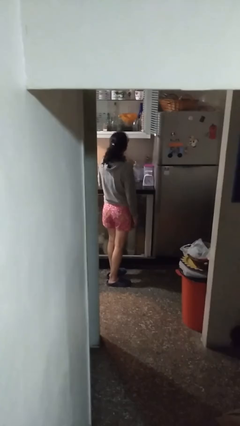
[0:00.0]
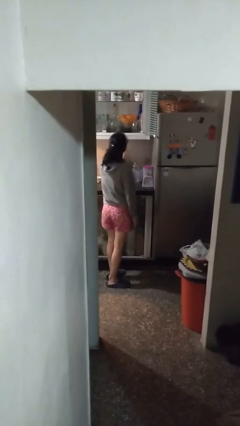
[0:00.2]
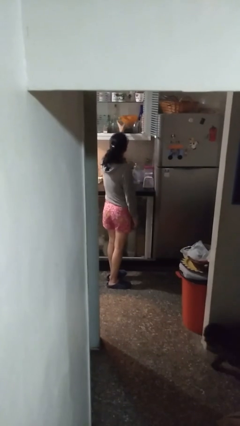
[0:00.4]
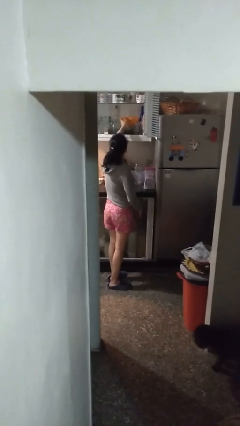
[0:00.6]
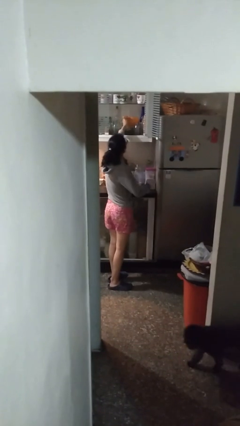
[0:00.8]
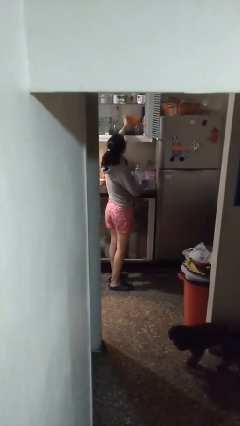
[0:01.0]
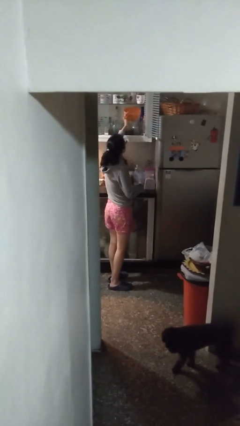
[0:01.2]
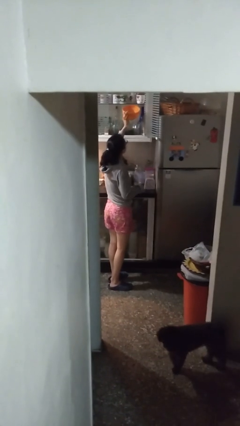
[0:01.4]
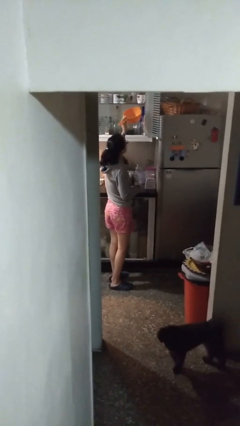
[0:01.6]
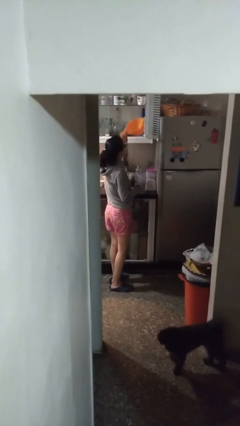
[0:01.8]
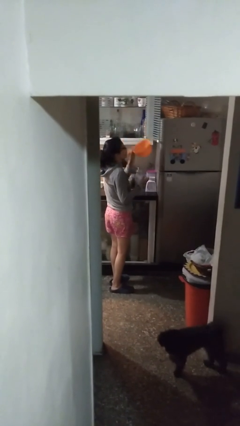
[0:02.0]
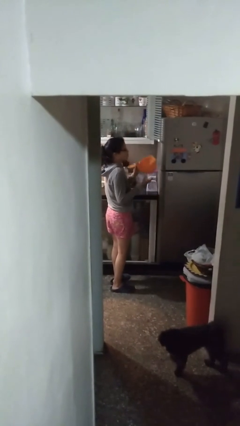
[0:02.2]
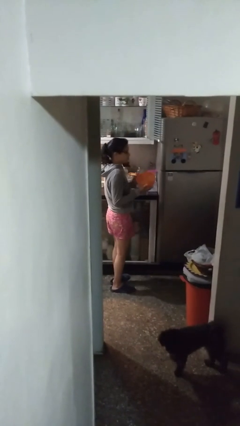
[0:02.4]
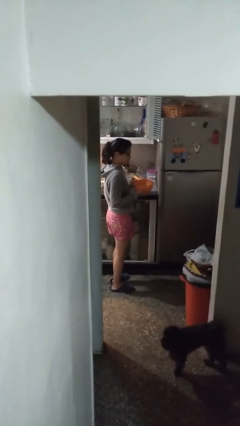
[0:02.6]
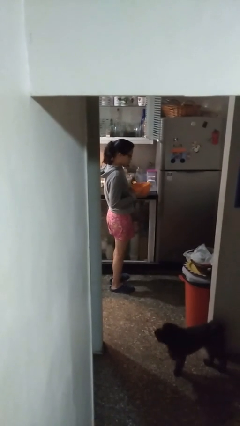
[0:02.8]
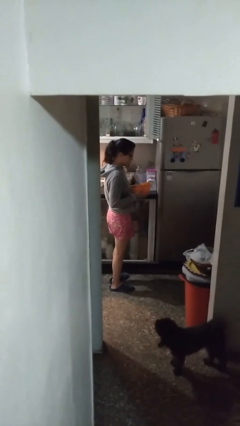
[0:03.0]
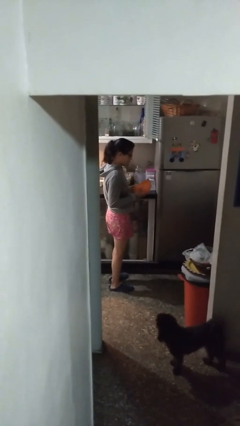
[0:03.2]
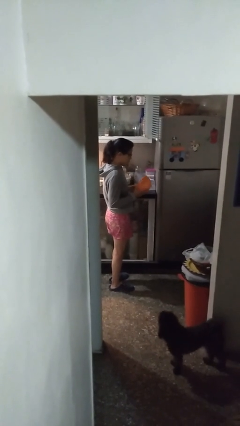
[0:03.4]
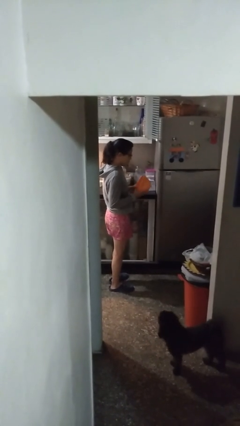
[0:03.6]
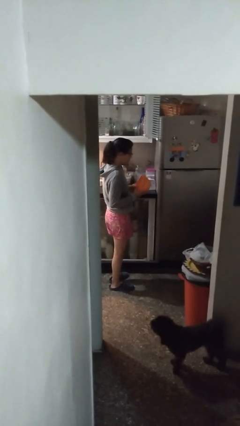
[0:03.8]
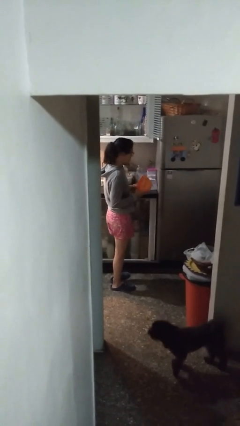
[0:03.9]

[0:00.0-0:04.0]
person picks up object from cabinet

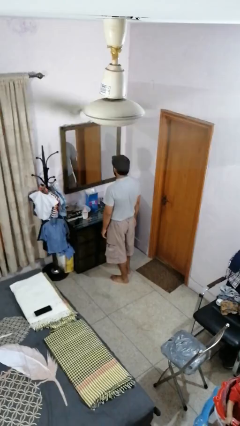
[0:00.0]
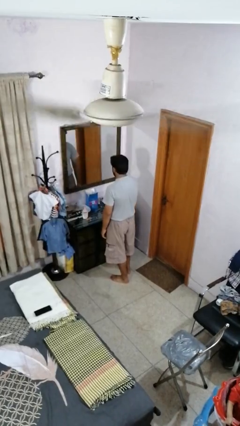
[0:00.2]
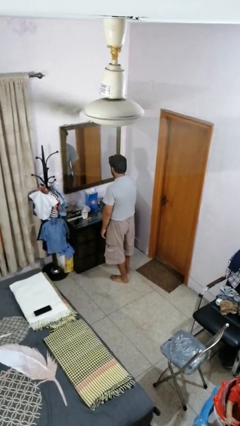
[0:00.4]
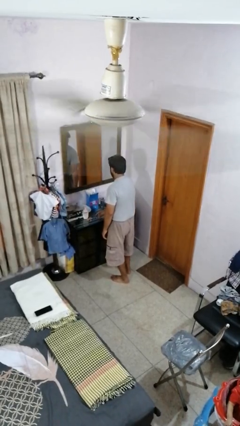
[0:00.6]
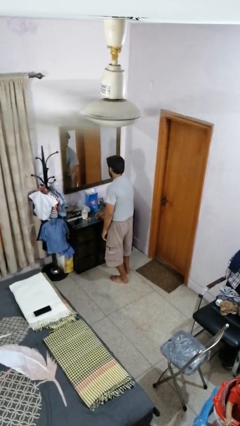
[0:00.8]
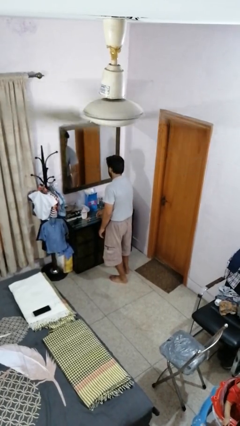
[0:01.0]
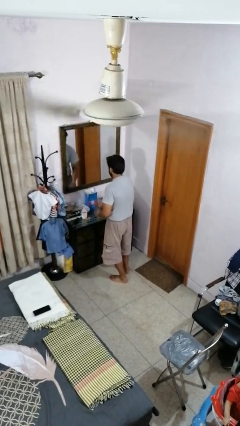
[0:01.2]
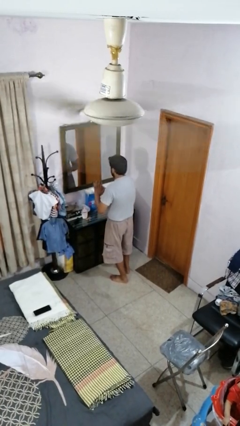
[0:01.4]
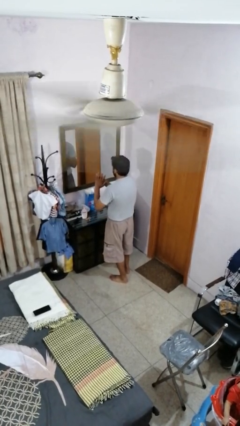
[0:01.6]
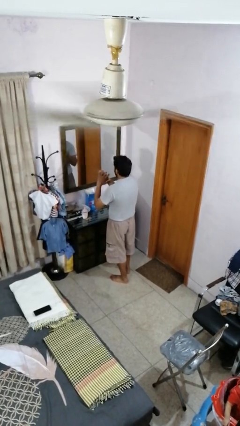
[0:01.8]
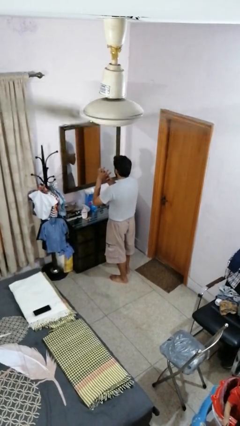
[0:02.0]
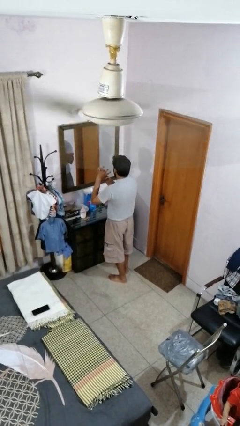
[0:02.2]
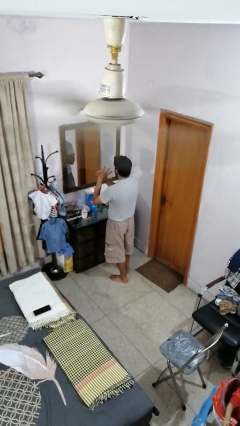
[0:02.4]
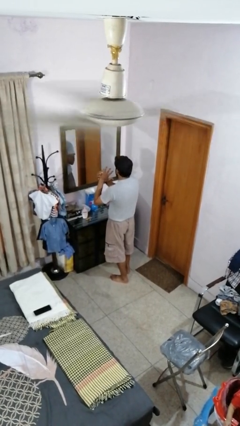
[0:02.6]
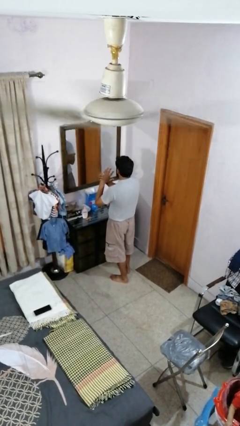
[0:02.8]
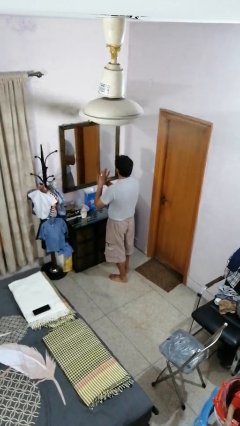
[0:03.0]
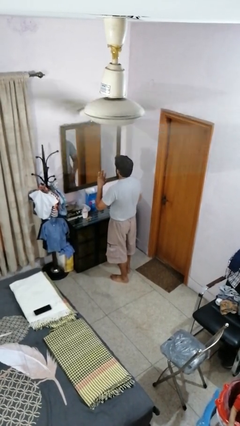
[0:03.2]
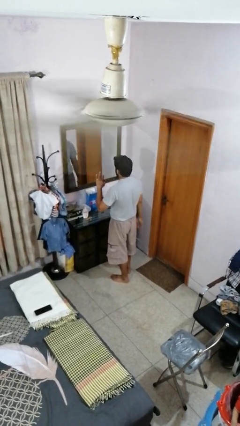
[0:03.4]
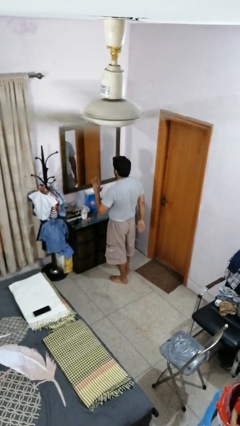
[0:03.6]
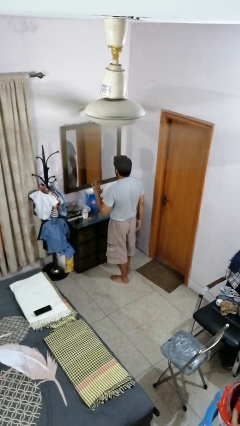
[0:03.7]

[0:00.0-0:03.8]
person puts on ring

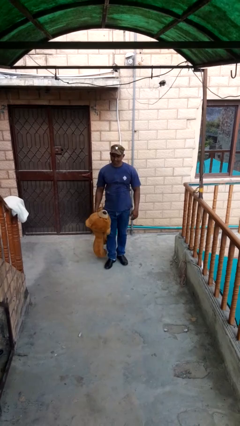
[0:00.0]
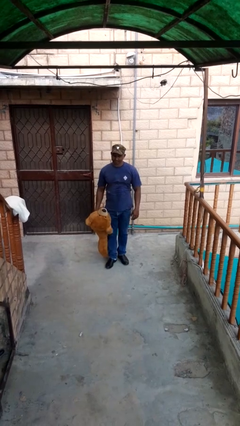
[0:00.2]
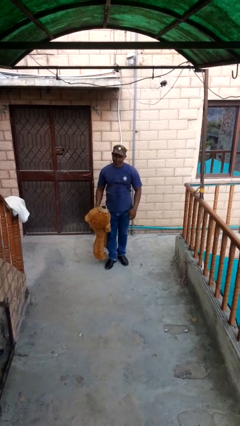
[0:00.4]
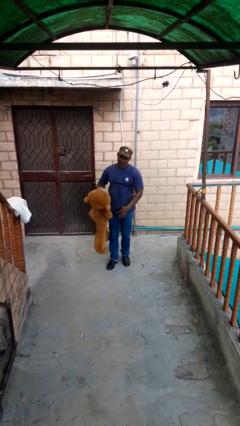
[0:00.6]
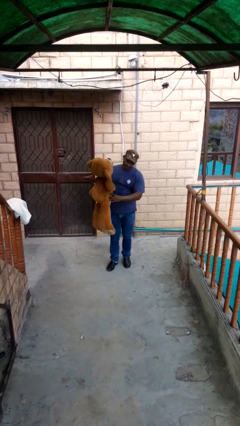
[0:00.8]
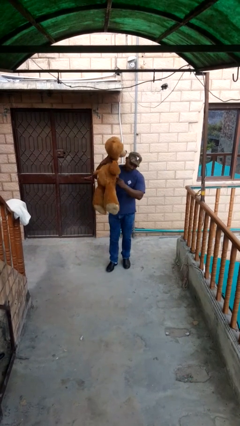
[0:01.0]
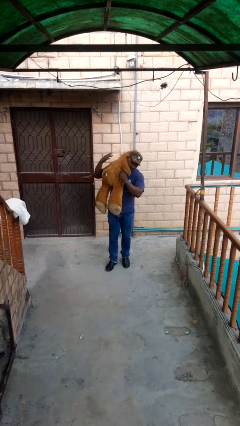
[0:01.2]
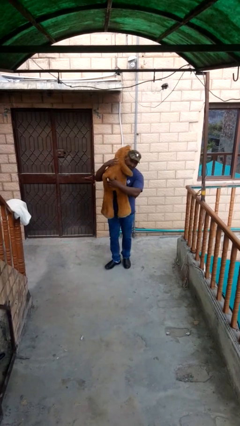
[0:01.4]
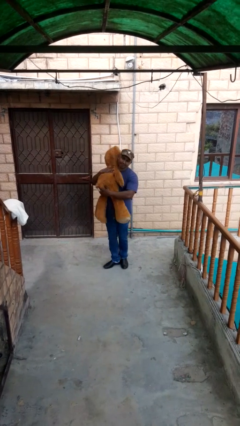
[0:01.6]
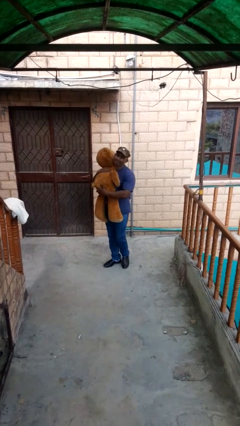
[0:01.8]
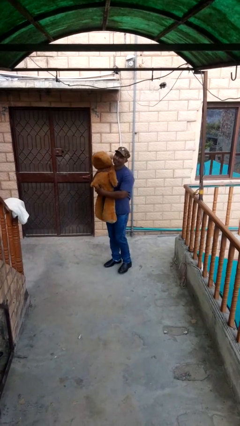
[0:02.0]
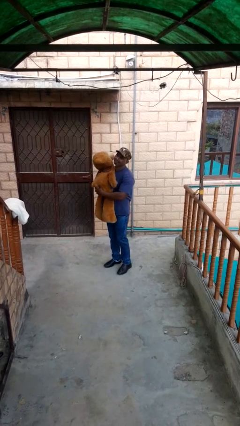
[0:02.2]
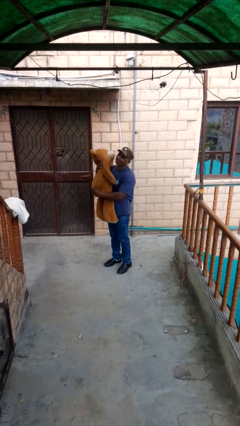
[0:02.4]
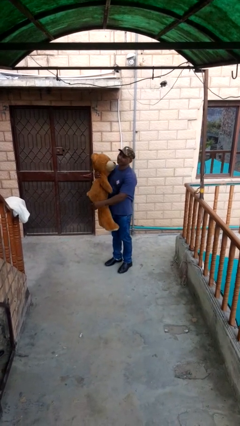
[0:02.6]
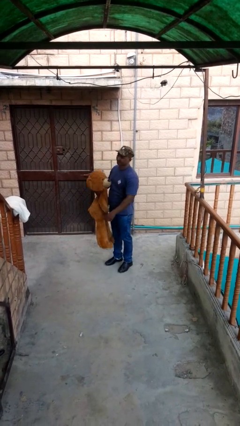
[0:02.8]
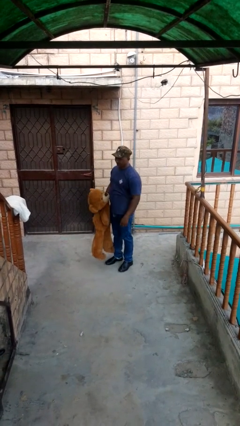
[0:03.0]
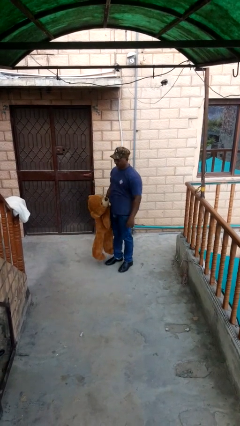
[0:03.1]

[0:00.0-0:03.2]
person hugs stuffed animal

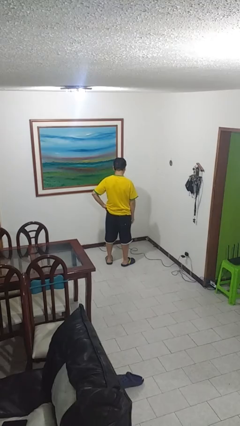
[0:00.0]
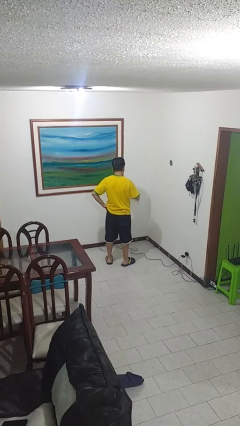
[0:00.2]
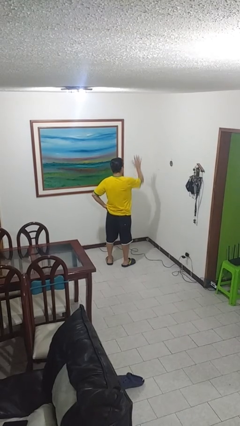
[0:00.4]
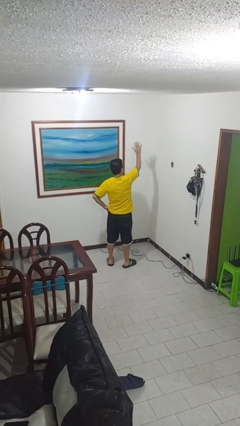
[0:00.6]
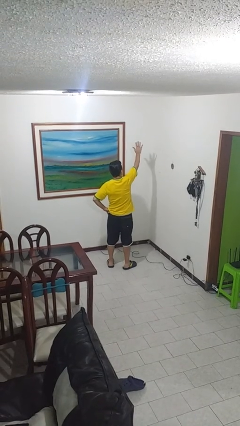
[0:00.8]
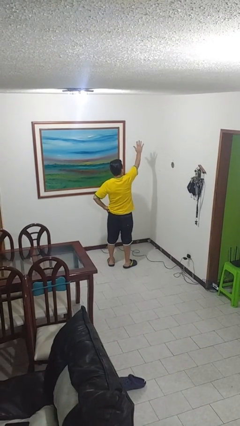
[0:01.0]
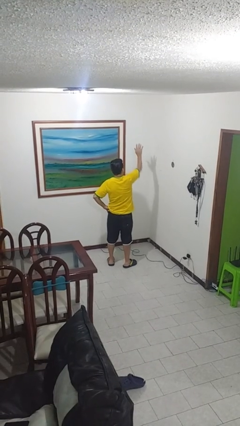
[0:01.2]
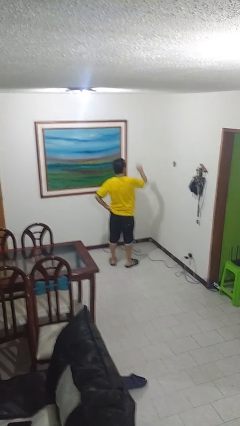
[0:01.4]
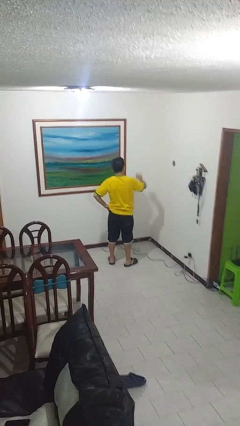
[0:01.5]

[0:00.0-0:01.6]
person gestures number five

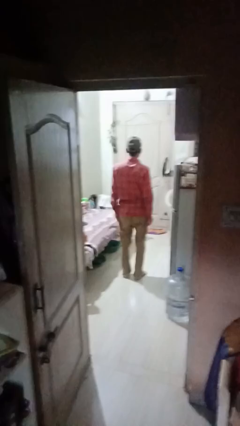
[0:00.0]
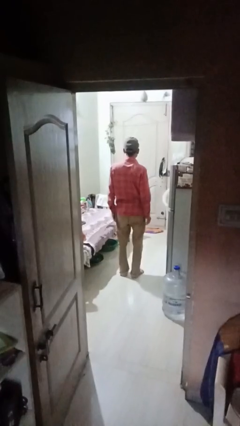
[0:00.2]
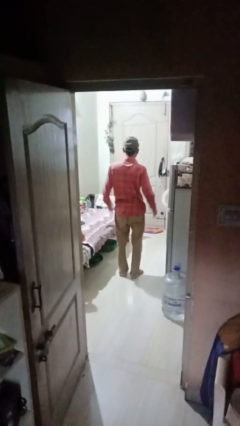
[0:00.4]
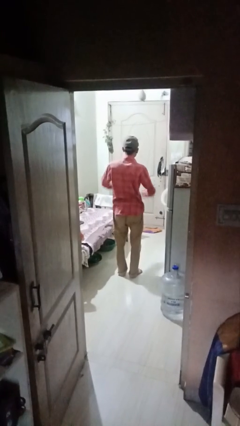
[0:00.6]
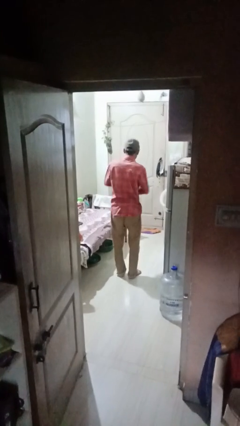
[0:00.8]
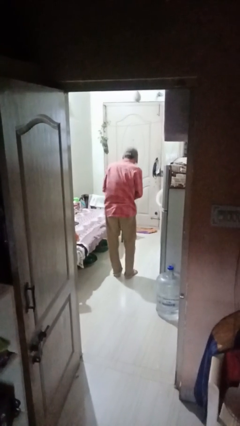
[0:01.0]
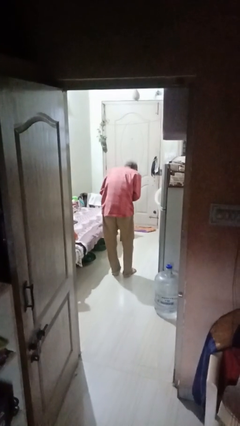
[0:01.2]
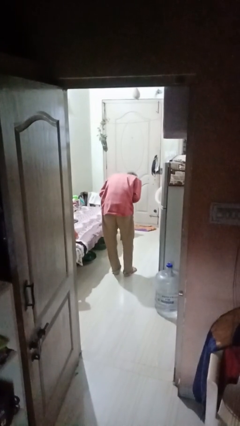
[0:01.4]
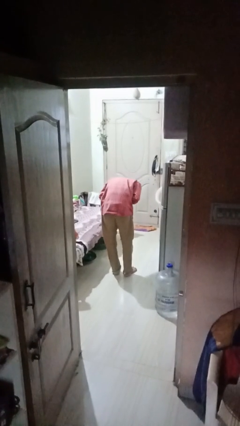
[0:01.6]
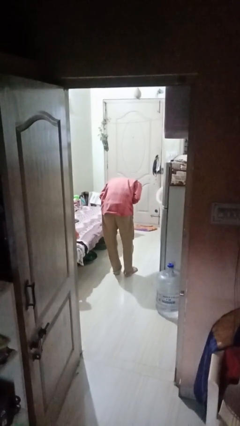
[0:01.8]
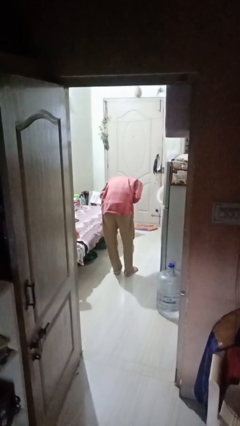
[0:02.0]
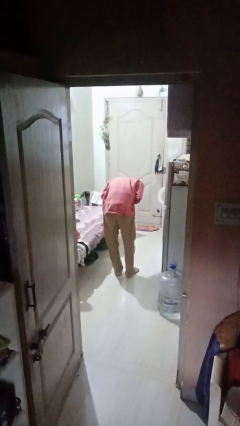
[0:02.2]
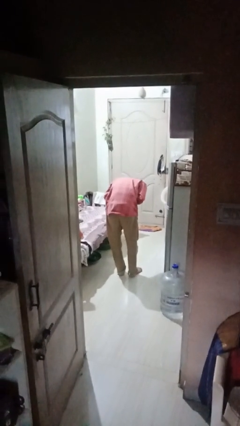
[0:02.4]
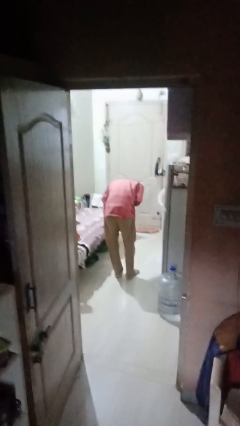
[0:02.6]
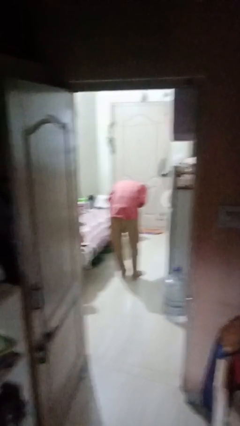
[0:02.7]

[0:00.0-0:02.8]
person bows

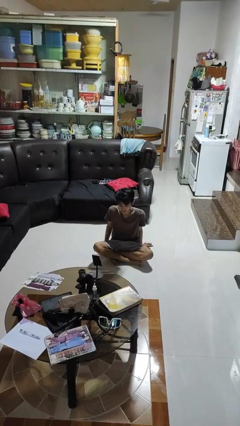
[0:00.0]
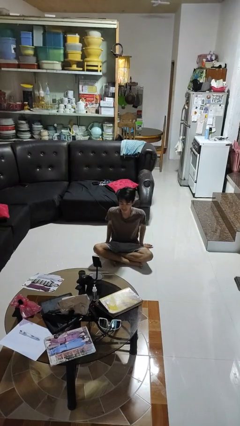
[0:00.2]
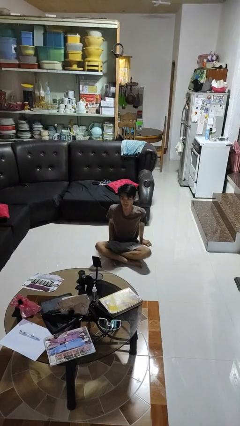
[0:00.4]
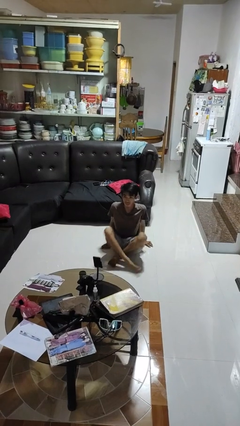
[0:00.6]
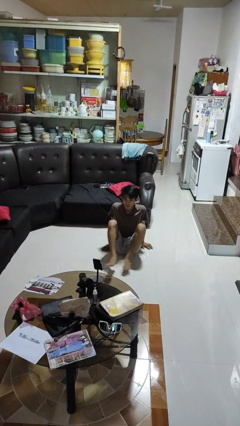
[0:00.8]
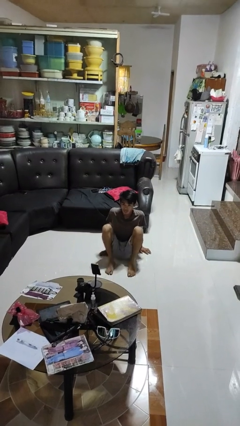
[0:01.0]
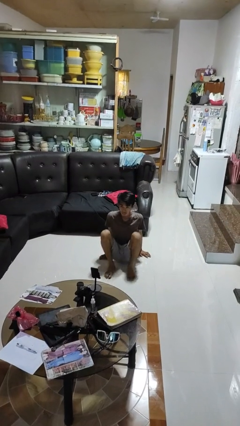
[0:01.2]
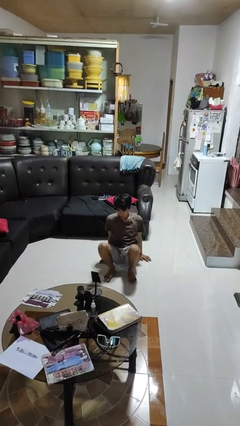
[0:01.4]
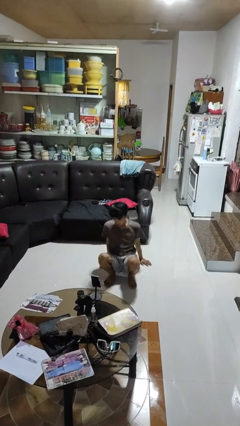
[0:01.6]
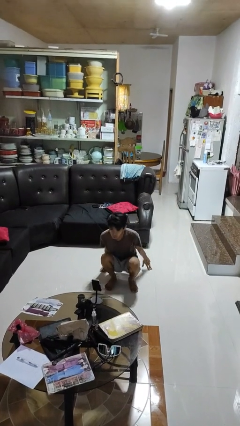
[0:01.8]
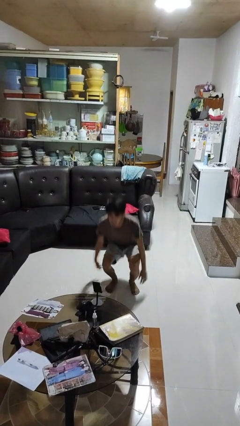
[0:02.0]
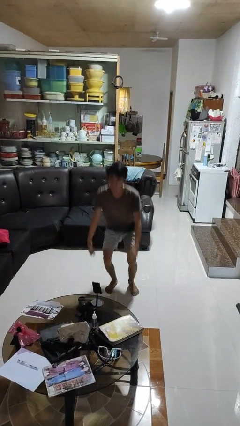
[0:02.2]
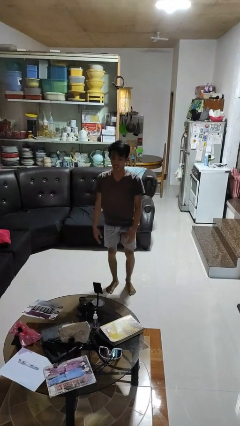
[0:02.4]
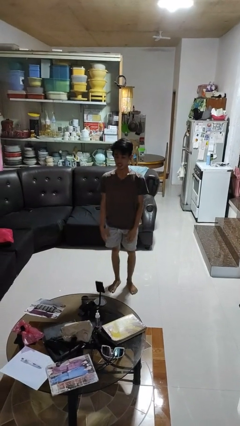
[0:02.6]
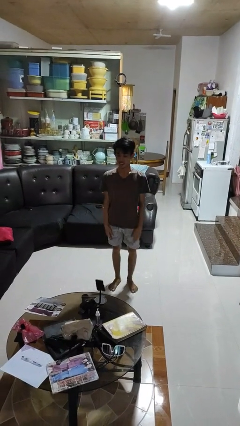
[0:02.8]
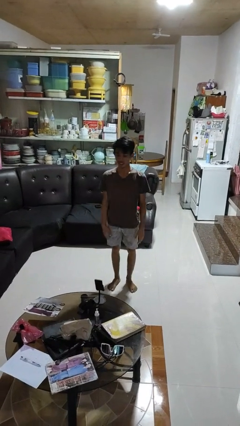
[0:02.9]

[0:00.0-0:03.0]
person stands up from floor
